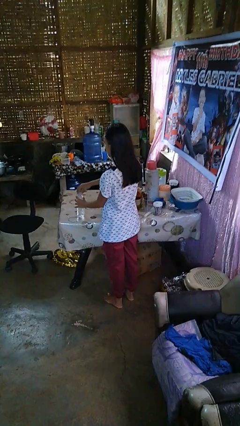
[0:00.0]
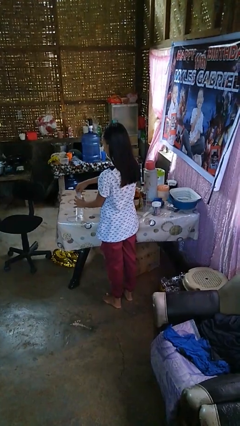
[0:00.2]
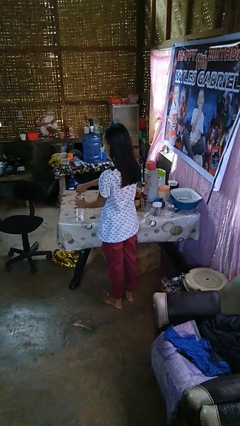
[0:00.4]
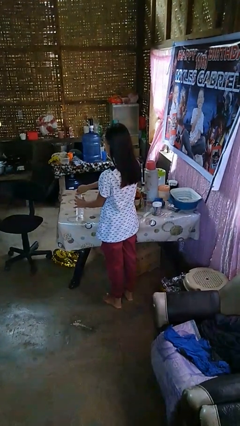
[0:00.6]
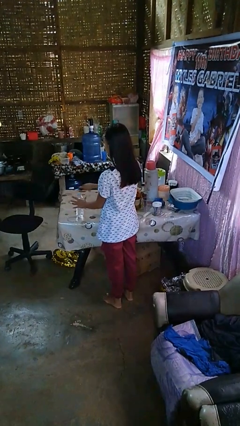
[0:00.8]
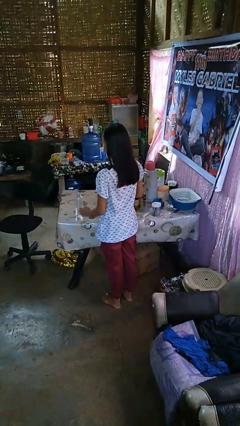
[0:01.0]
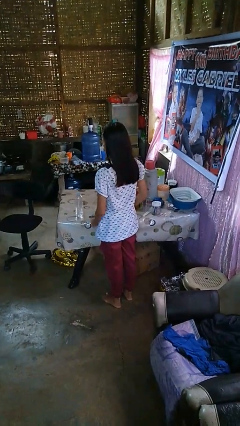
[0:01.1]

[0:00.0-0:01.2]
person screws lid to bottle

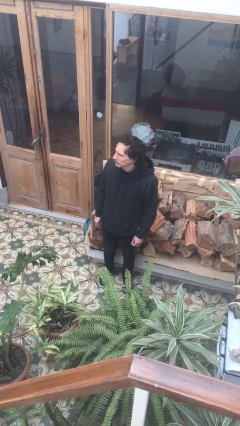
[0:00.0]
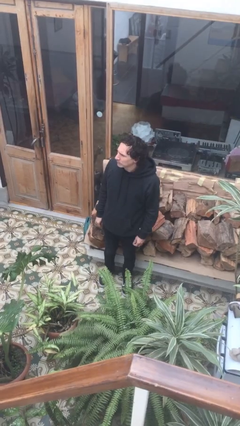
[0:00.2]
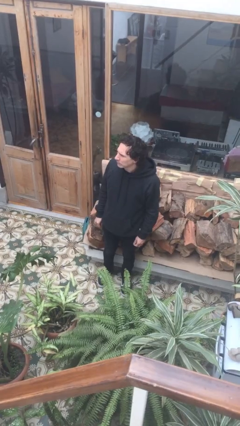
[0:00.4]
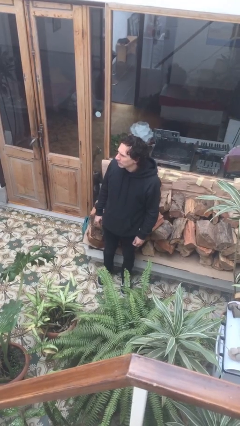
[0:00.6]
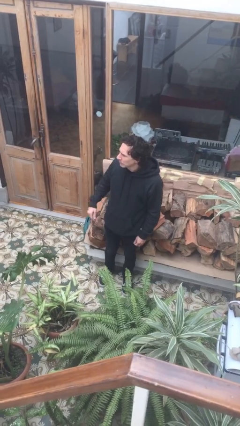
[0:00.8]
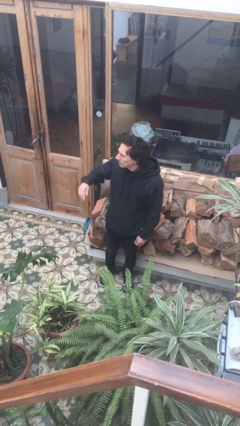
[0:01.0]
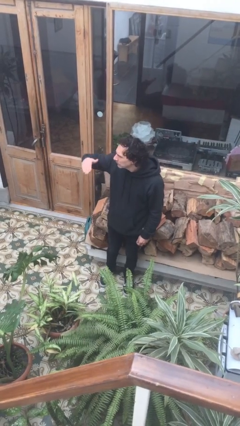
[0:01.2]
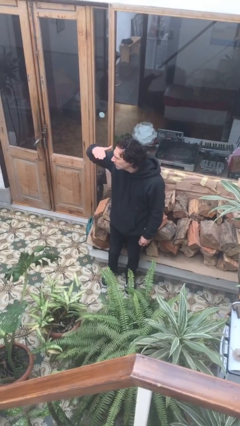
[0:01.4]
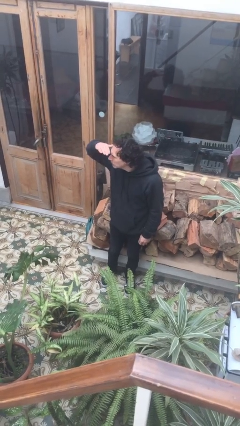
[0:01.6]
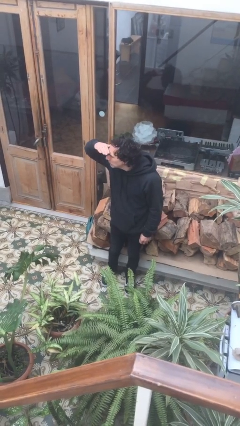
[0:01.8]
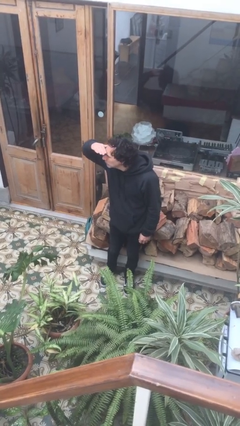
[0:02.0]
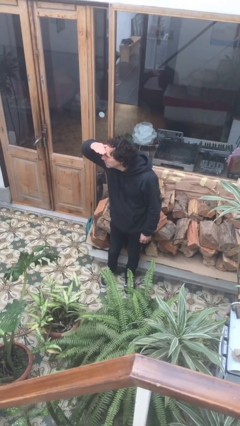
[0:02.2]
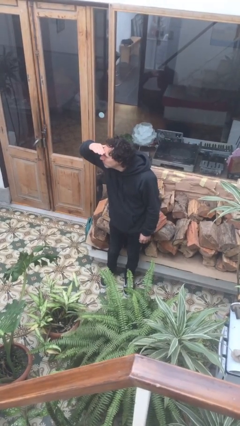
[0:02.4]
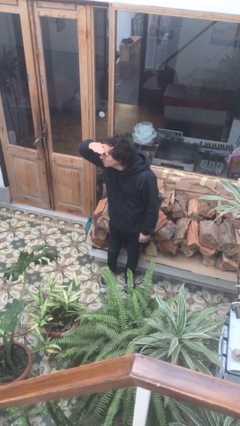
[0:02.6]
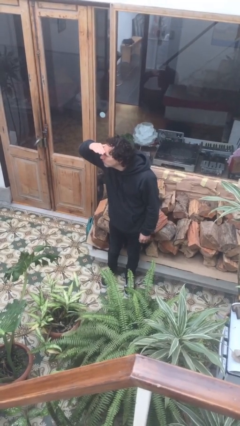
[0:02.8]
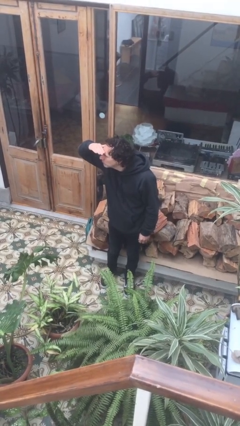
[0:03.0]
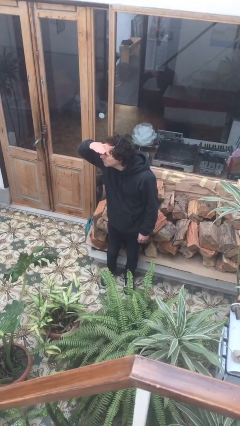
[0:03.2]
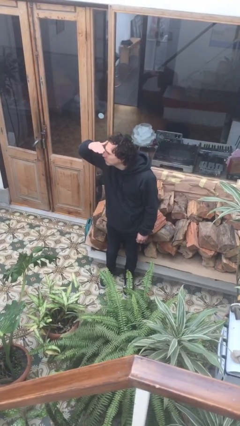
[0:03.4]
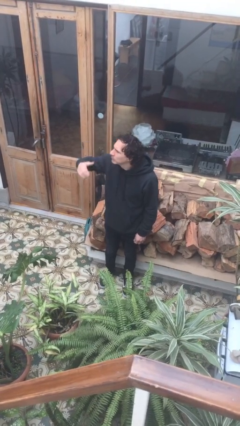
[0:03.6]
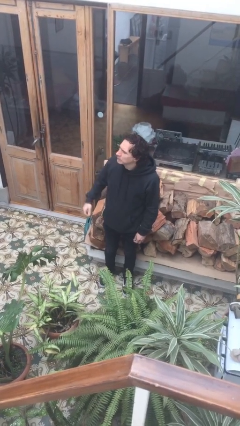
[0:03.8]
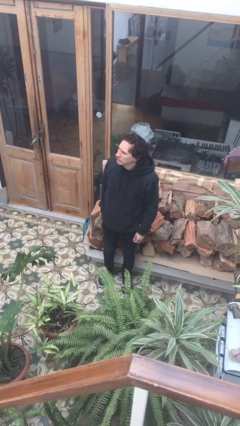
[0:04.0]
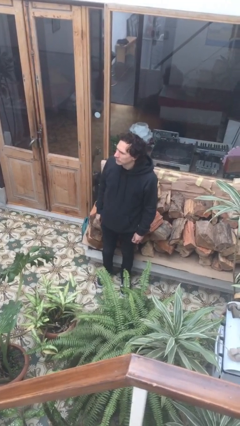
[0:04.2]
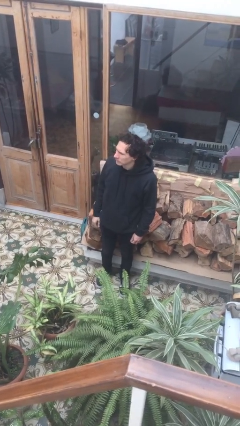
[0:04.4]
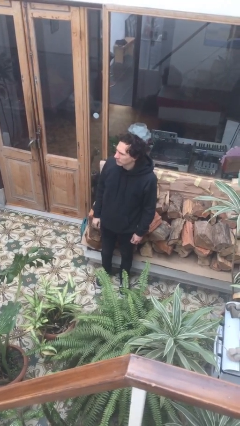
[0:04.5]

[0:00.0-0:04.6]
person shades eyes

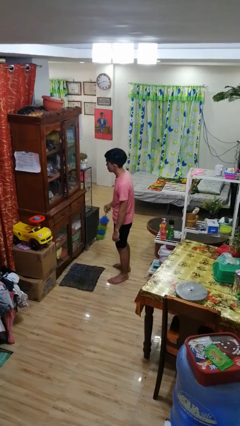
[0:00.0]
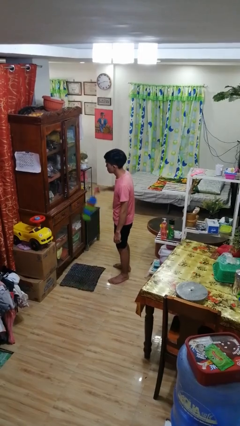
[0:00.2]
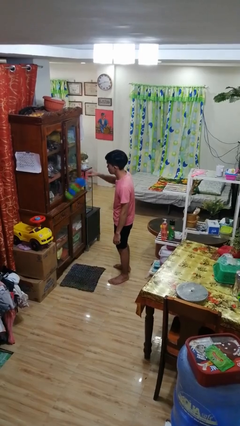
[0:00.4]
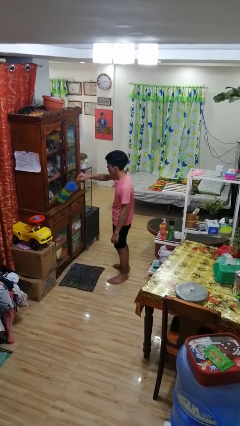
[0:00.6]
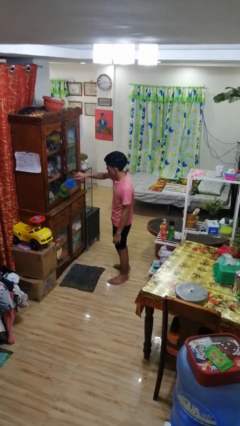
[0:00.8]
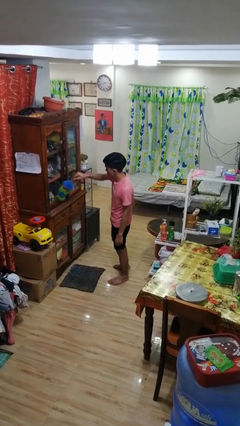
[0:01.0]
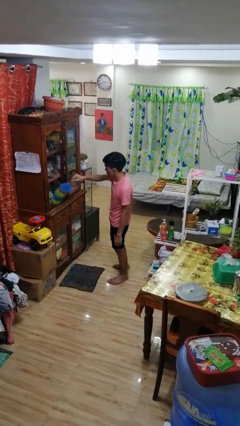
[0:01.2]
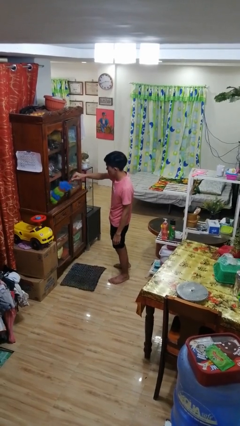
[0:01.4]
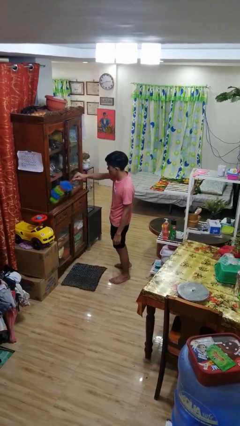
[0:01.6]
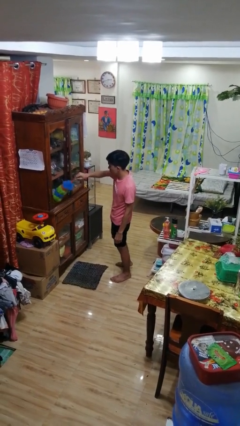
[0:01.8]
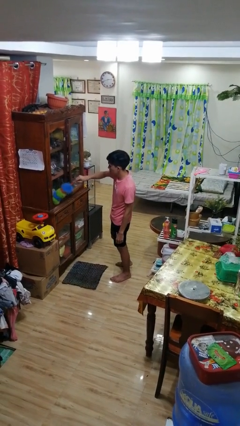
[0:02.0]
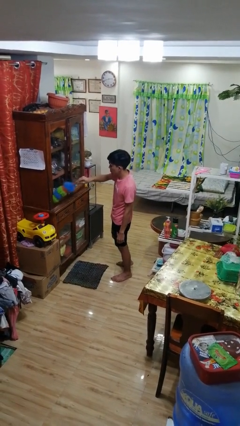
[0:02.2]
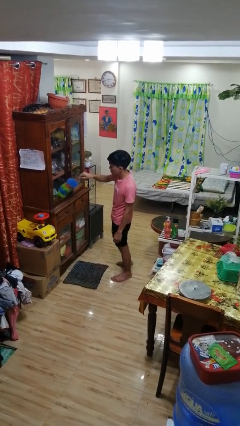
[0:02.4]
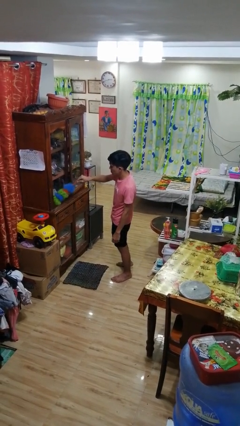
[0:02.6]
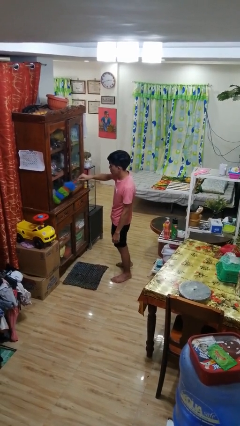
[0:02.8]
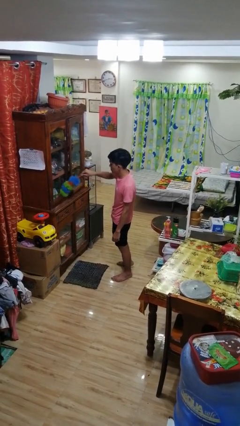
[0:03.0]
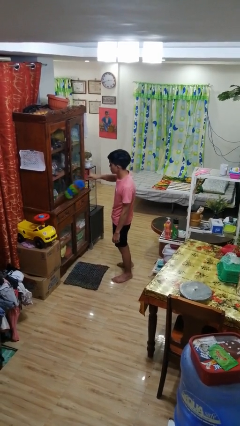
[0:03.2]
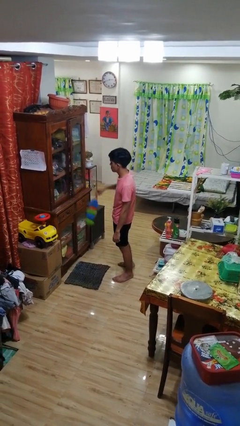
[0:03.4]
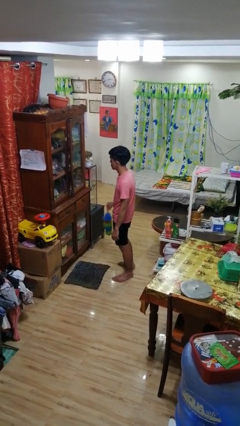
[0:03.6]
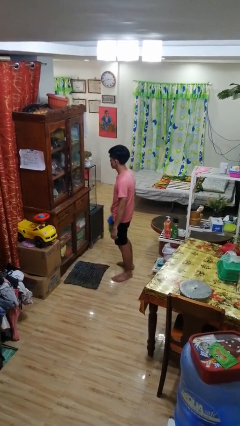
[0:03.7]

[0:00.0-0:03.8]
person dusts furniture

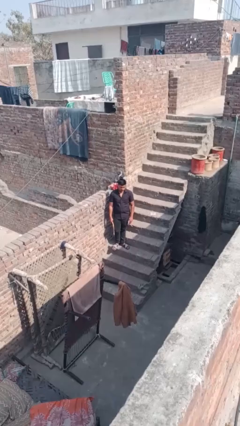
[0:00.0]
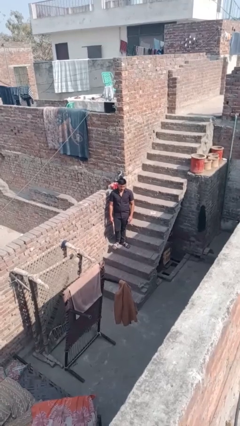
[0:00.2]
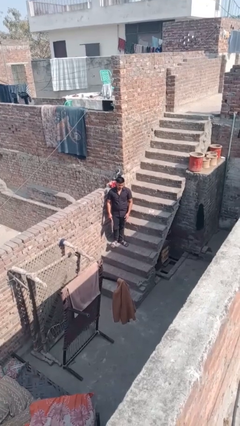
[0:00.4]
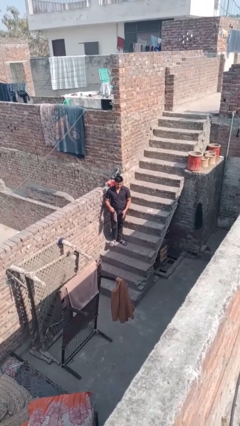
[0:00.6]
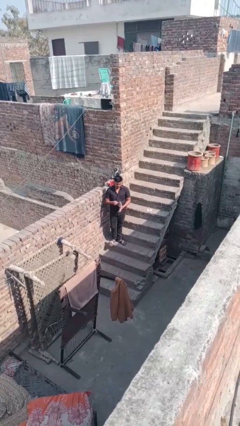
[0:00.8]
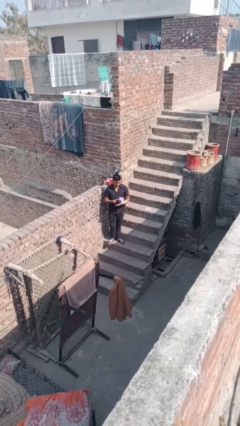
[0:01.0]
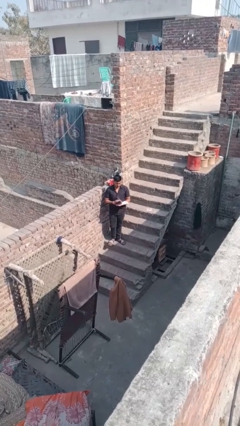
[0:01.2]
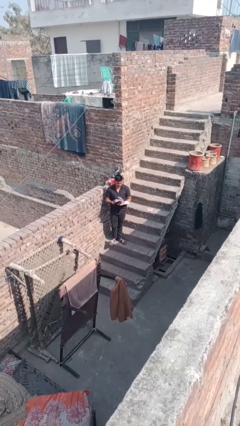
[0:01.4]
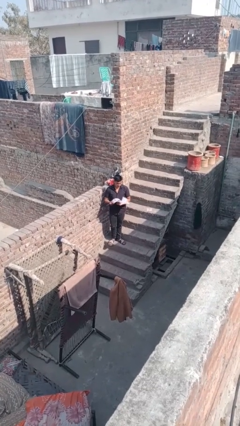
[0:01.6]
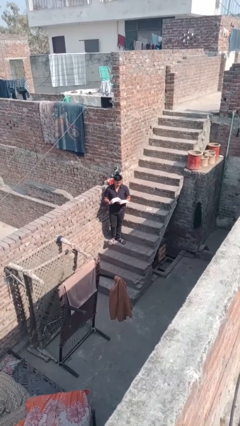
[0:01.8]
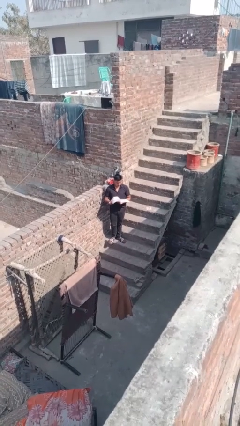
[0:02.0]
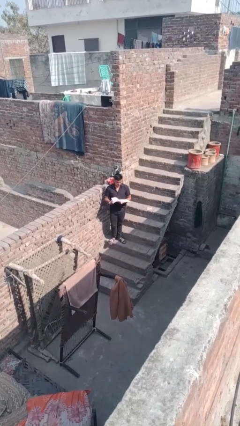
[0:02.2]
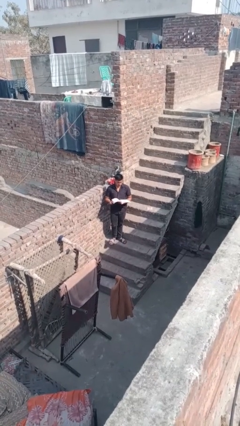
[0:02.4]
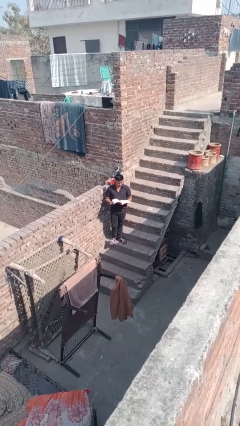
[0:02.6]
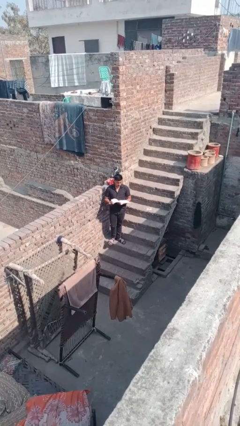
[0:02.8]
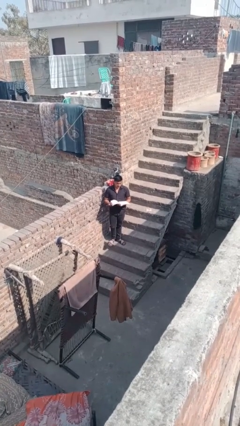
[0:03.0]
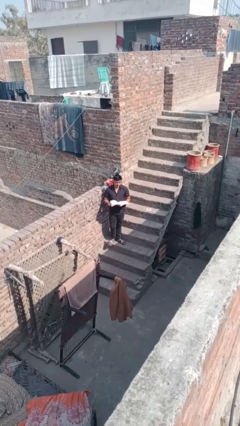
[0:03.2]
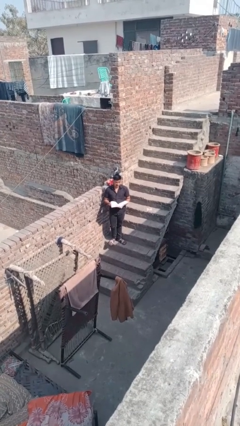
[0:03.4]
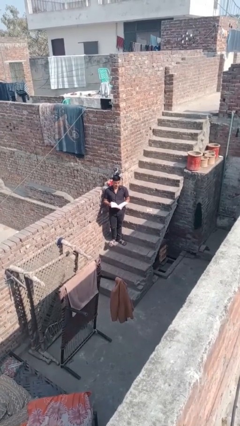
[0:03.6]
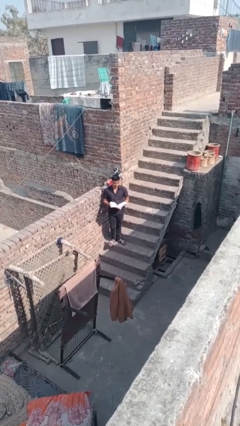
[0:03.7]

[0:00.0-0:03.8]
person reads document

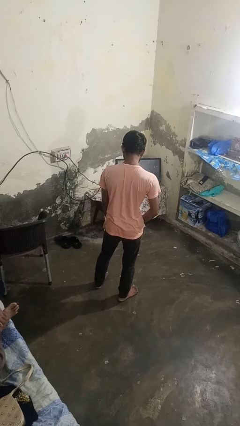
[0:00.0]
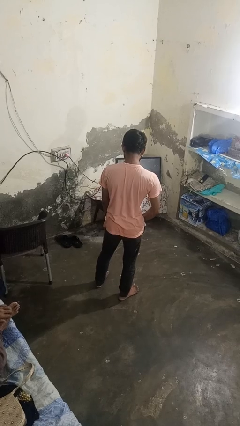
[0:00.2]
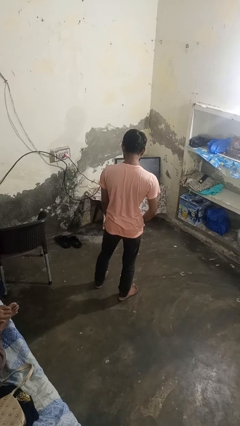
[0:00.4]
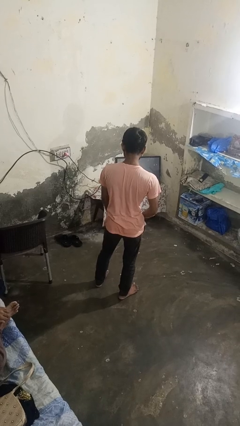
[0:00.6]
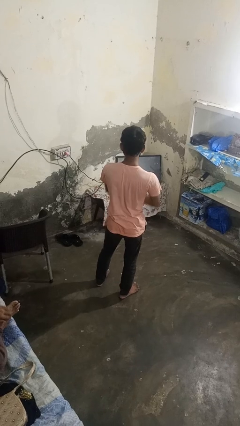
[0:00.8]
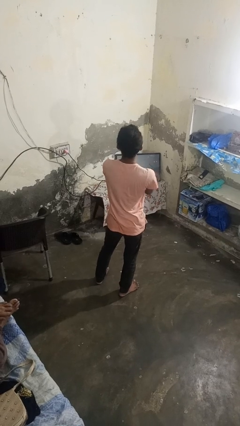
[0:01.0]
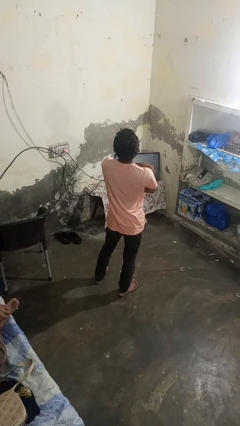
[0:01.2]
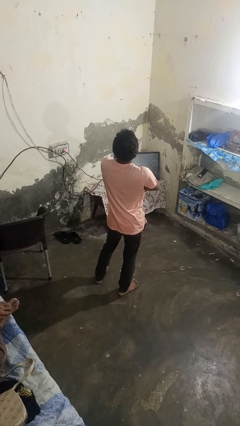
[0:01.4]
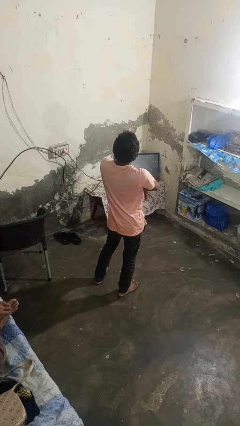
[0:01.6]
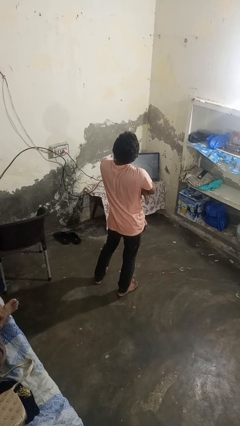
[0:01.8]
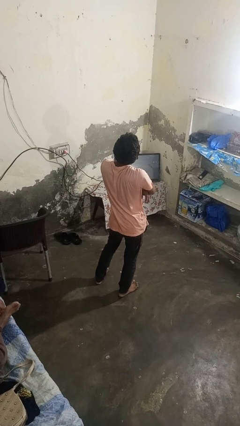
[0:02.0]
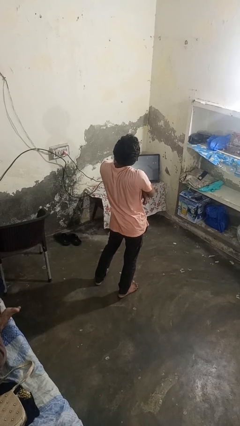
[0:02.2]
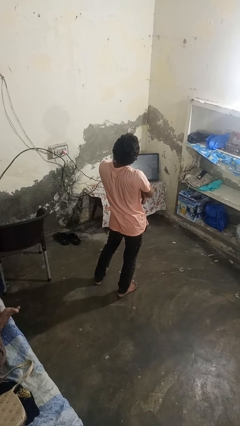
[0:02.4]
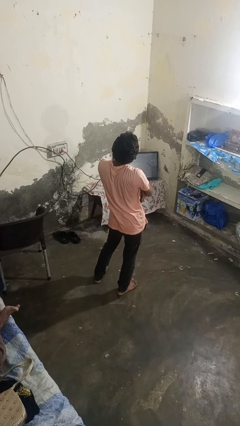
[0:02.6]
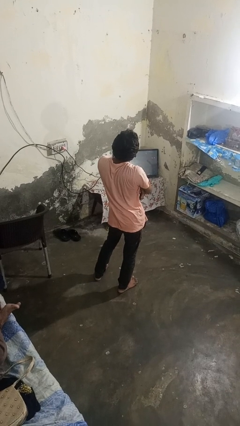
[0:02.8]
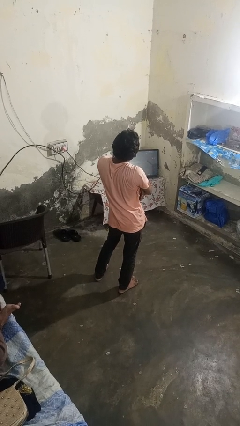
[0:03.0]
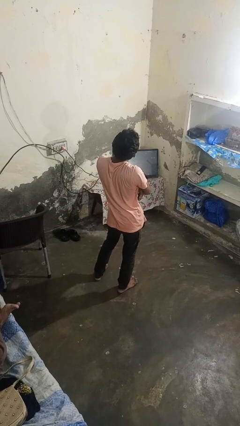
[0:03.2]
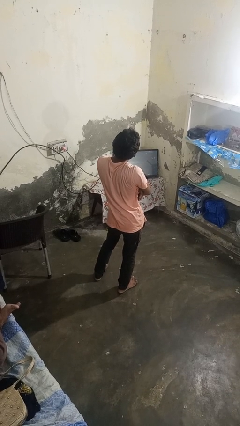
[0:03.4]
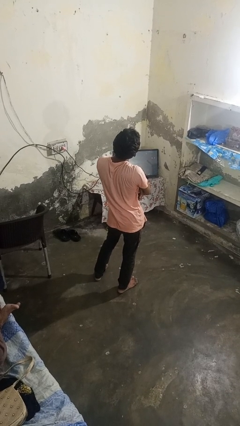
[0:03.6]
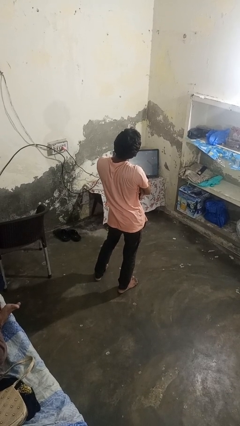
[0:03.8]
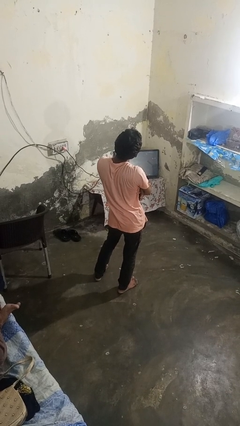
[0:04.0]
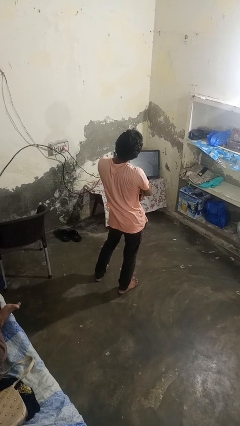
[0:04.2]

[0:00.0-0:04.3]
person crosses arms
